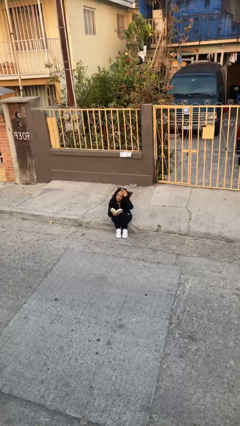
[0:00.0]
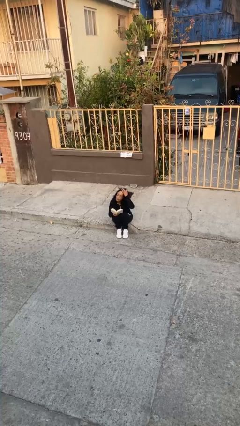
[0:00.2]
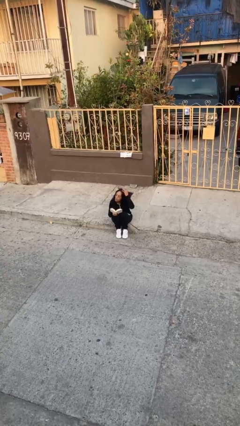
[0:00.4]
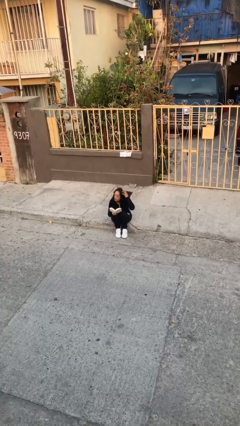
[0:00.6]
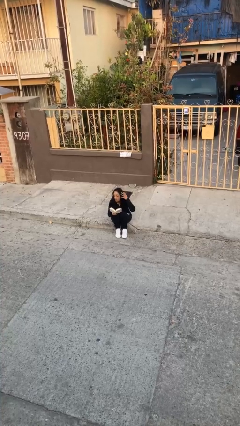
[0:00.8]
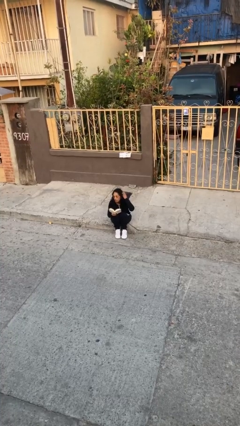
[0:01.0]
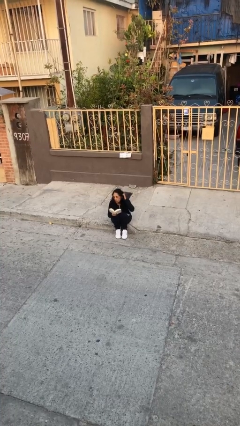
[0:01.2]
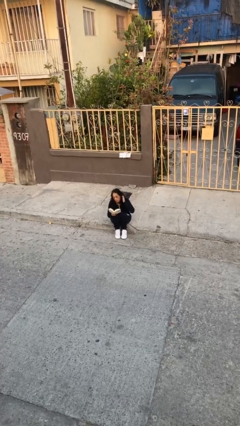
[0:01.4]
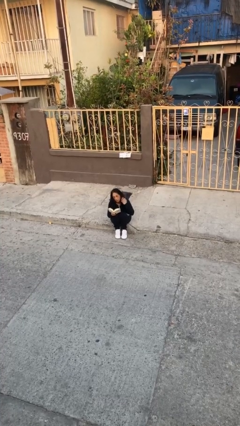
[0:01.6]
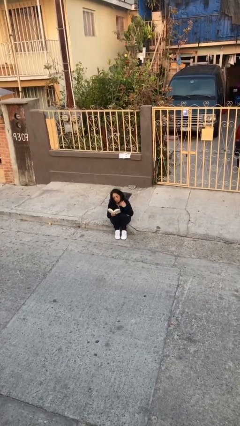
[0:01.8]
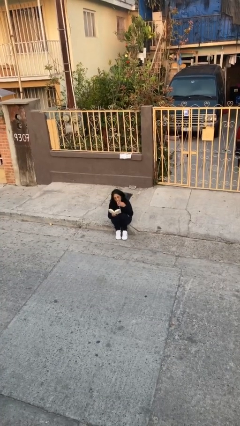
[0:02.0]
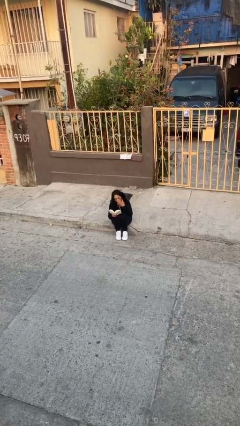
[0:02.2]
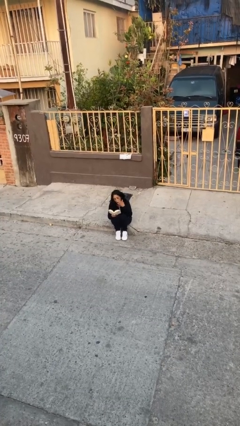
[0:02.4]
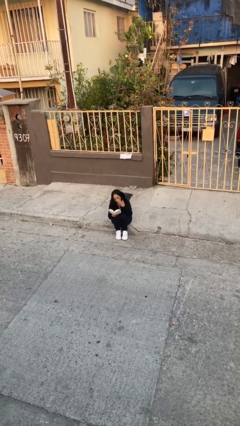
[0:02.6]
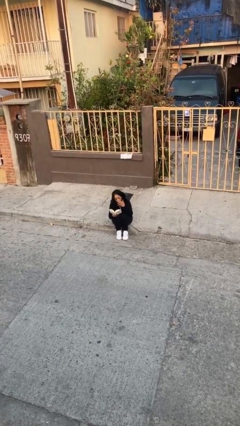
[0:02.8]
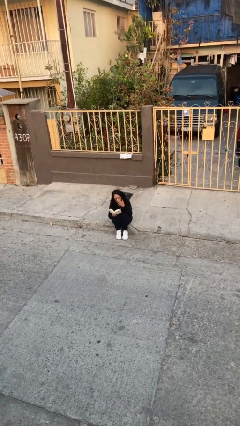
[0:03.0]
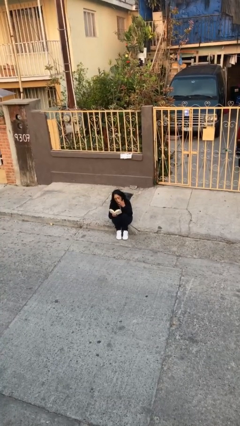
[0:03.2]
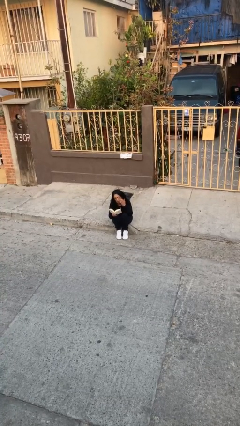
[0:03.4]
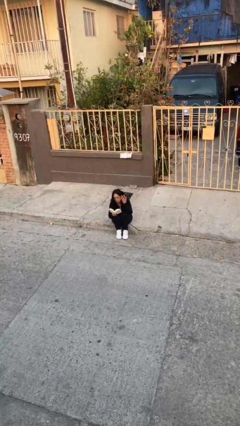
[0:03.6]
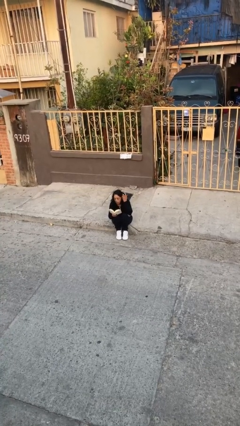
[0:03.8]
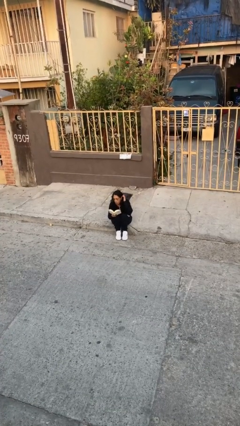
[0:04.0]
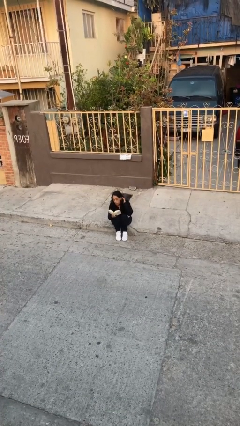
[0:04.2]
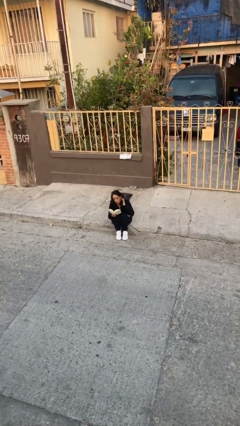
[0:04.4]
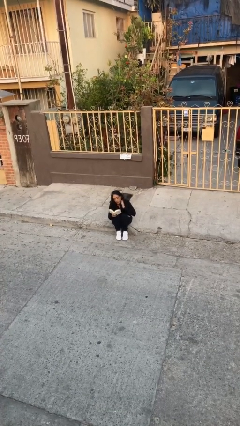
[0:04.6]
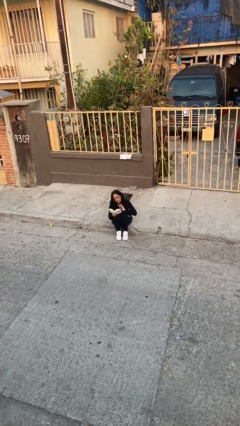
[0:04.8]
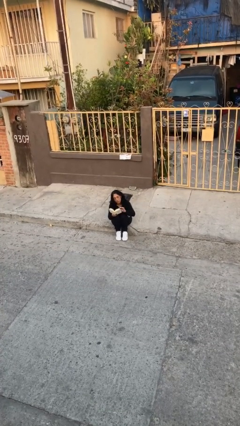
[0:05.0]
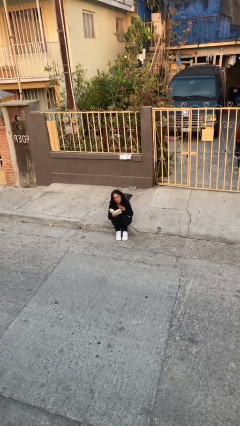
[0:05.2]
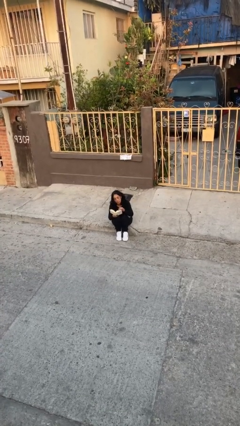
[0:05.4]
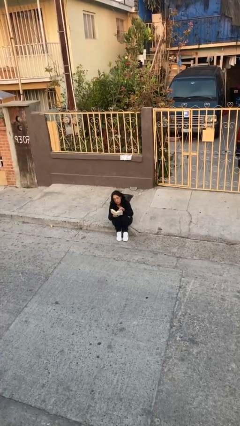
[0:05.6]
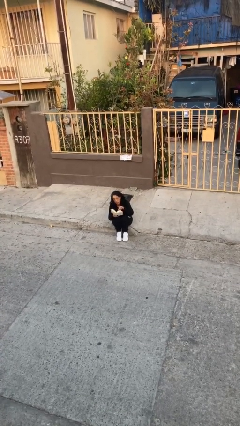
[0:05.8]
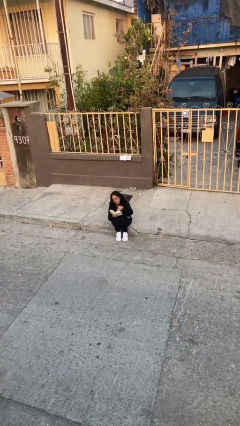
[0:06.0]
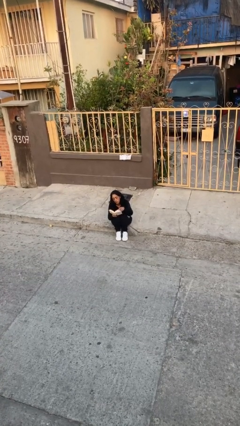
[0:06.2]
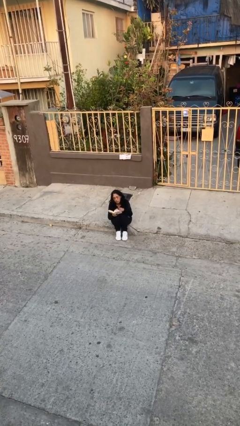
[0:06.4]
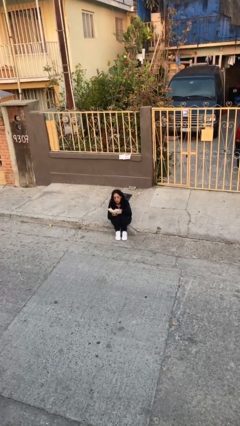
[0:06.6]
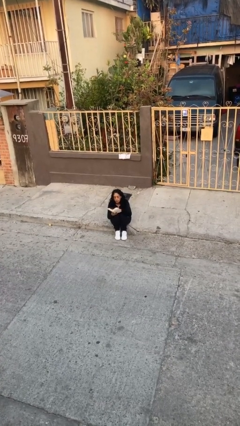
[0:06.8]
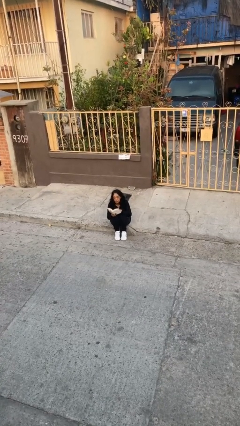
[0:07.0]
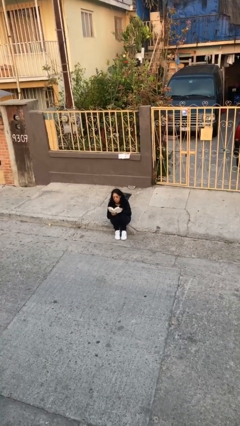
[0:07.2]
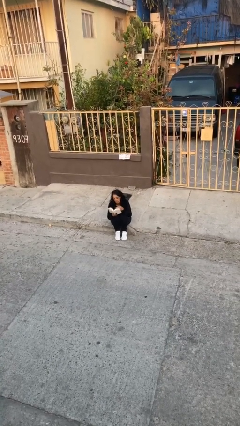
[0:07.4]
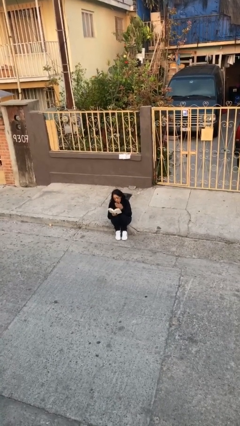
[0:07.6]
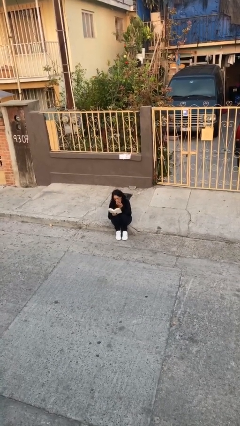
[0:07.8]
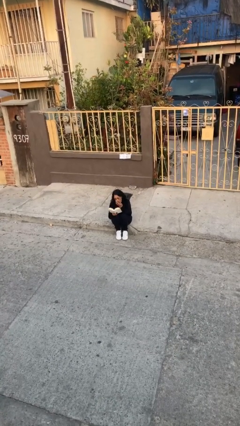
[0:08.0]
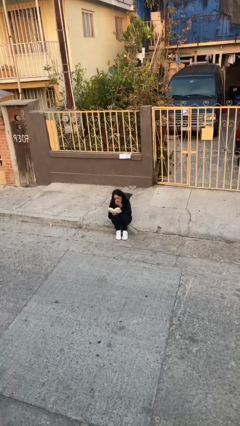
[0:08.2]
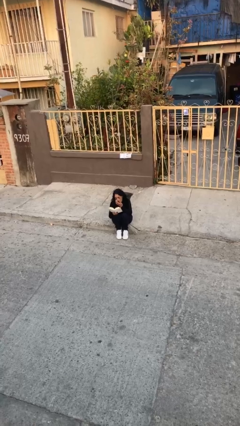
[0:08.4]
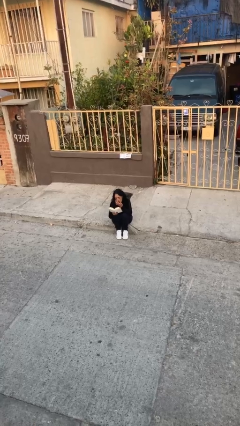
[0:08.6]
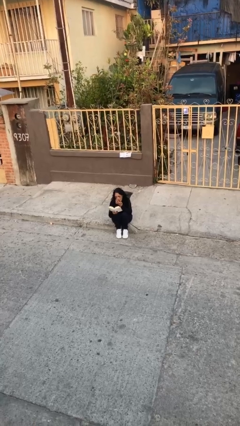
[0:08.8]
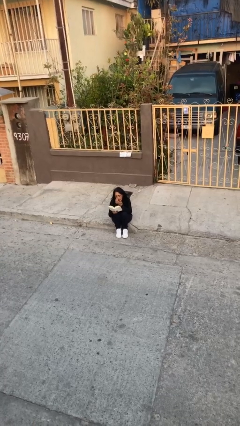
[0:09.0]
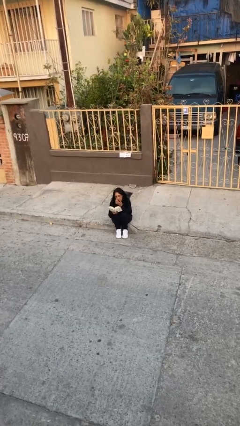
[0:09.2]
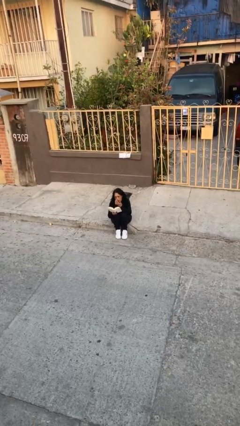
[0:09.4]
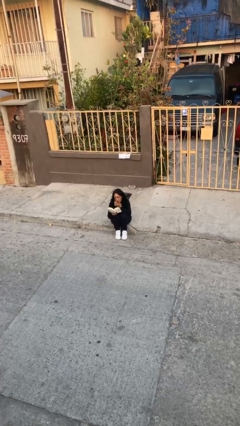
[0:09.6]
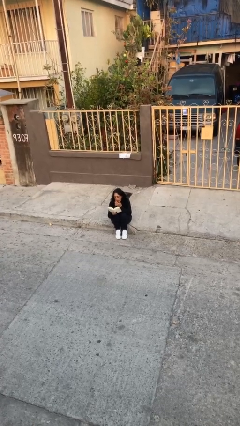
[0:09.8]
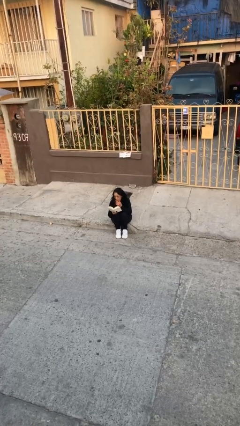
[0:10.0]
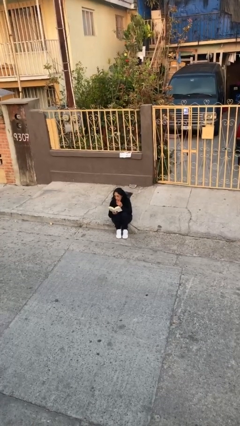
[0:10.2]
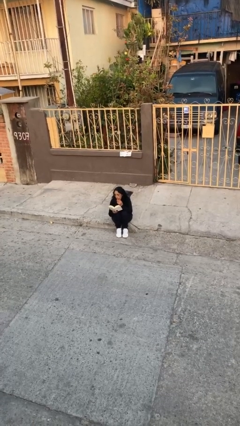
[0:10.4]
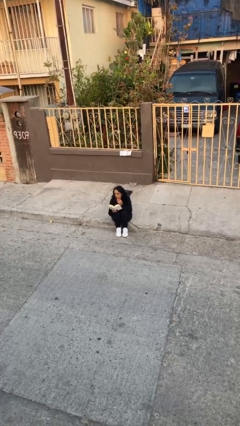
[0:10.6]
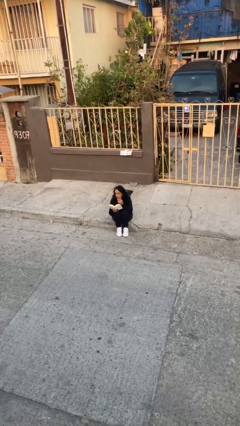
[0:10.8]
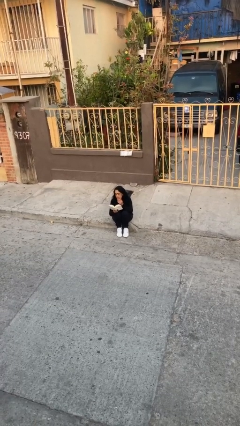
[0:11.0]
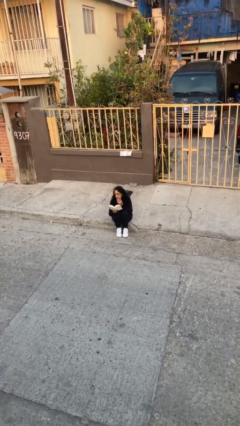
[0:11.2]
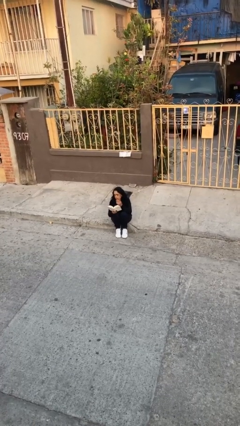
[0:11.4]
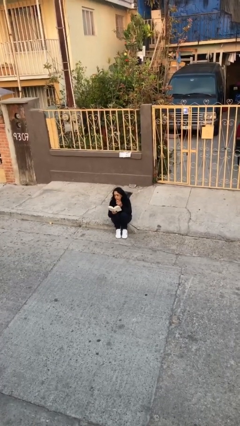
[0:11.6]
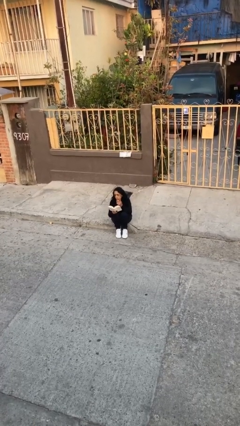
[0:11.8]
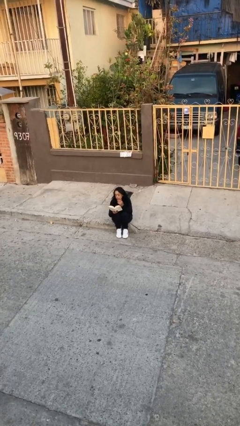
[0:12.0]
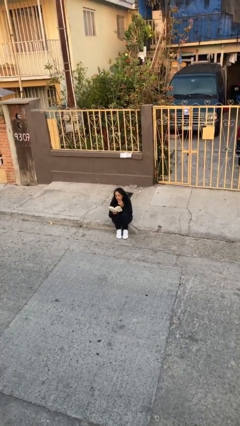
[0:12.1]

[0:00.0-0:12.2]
person reads document

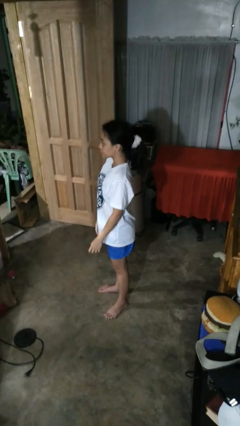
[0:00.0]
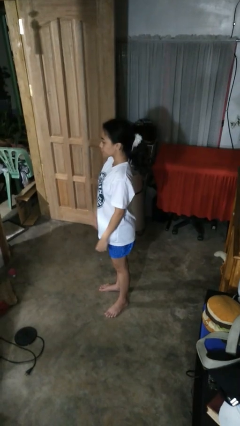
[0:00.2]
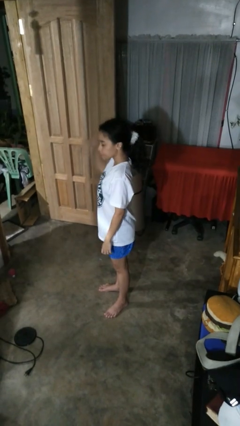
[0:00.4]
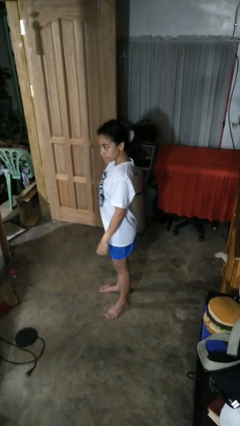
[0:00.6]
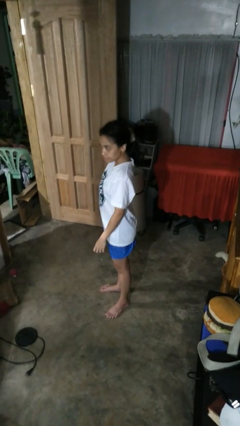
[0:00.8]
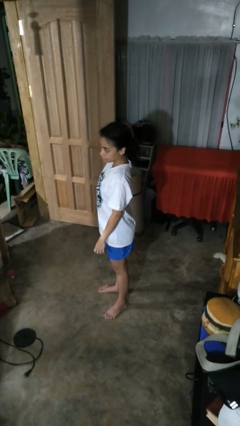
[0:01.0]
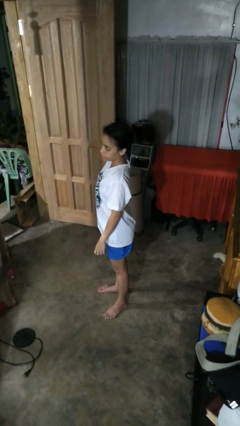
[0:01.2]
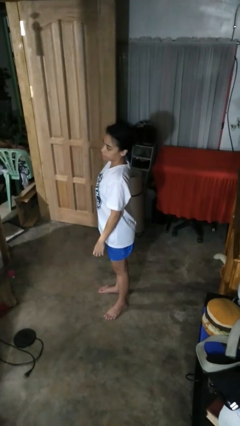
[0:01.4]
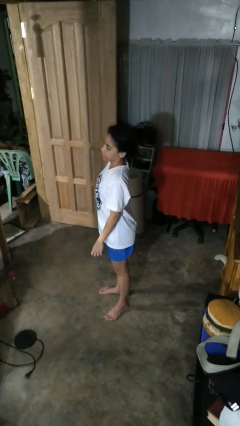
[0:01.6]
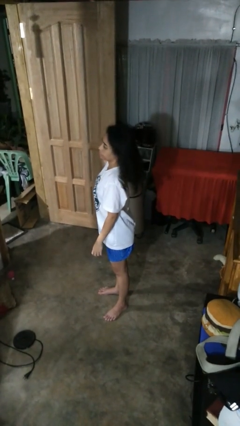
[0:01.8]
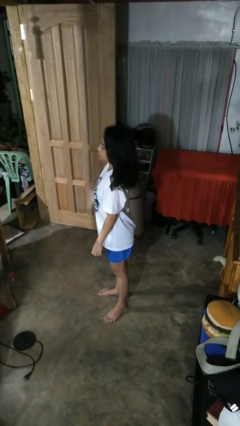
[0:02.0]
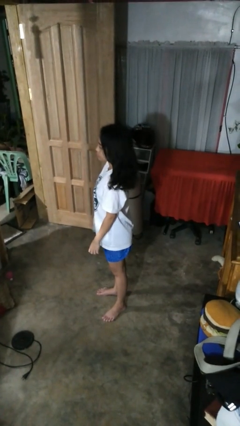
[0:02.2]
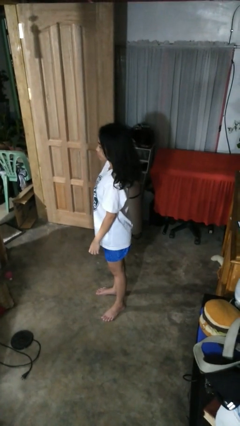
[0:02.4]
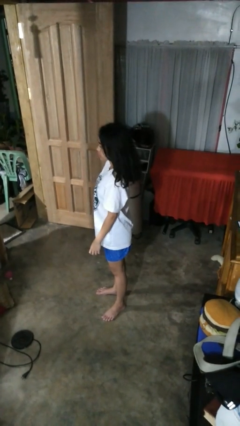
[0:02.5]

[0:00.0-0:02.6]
person takes off hairtie

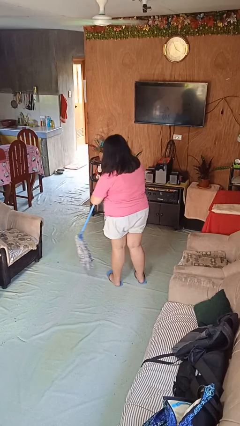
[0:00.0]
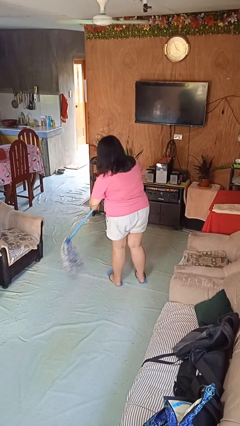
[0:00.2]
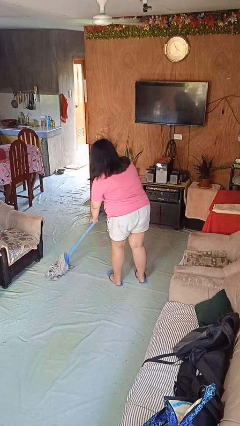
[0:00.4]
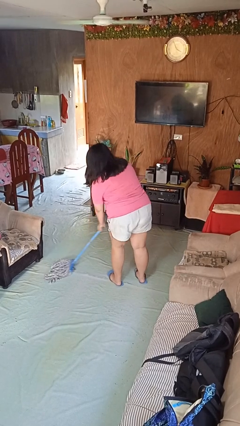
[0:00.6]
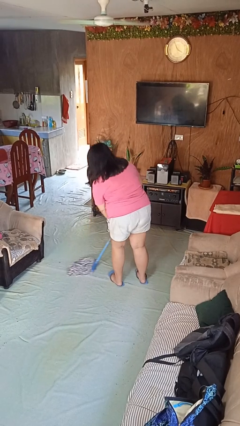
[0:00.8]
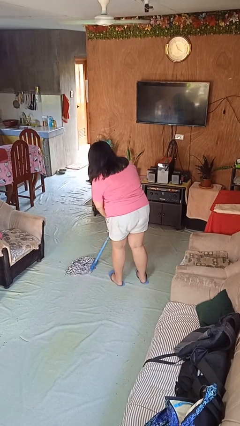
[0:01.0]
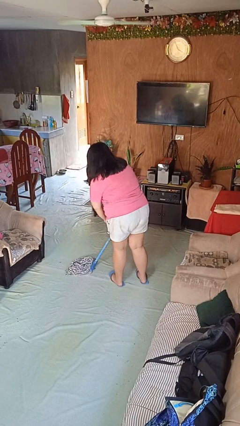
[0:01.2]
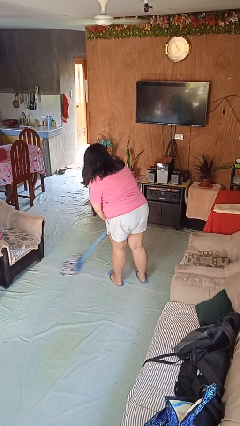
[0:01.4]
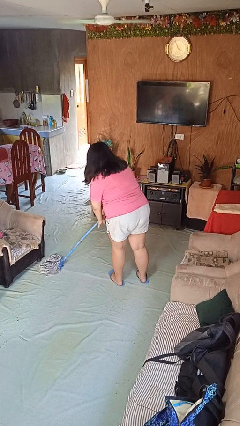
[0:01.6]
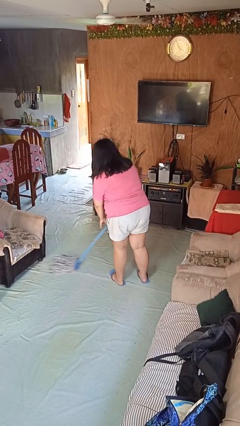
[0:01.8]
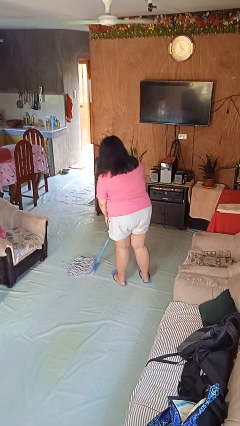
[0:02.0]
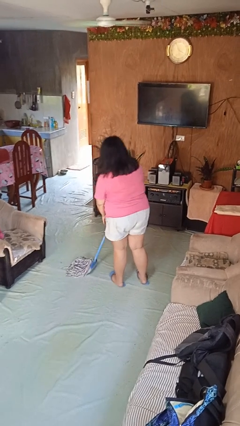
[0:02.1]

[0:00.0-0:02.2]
person mops

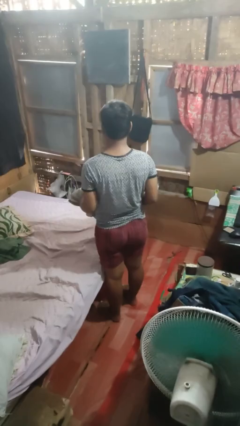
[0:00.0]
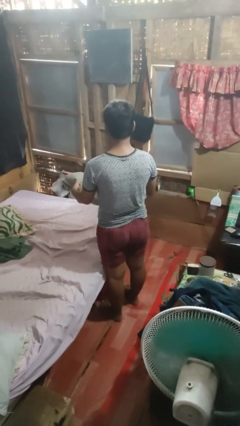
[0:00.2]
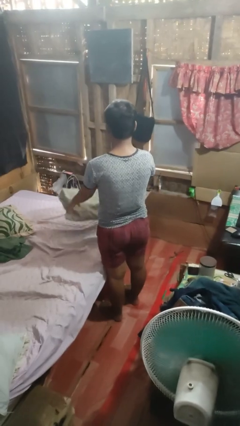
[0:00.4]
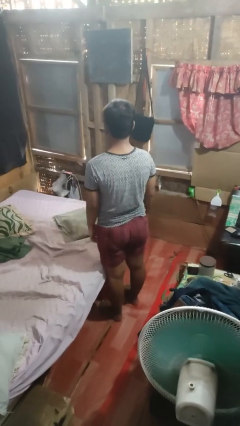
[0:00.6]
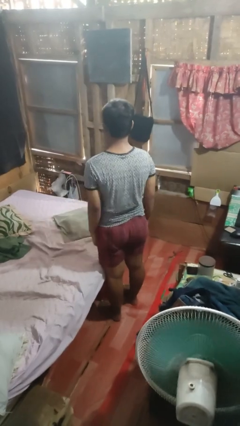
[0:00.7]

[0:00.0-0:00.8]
person puts down object on bed
